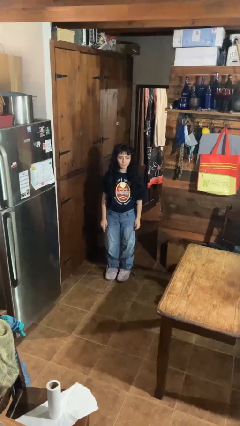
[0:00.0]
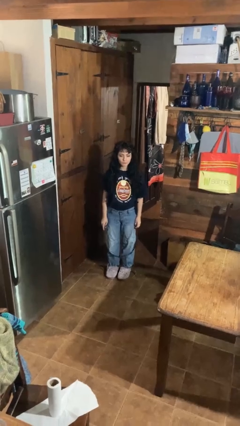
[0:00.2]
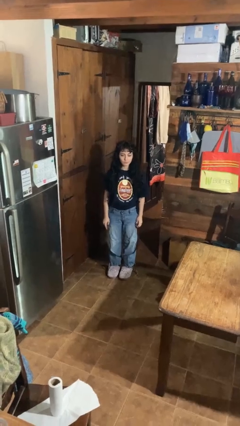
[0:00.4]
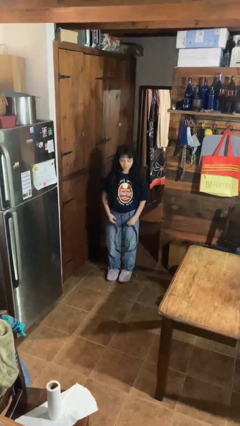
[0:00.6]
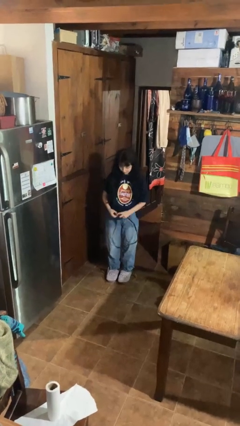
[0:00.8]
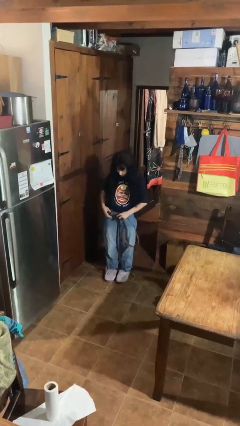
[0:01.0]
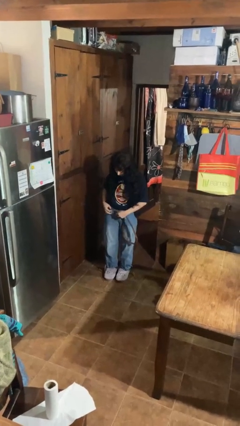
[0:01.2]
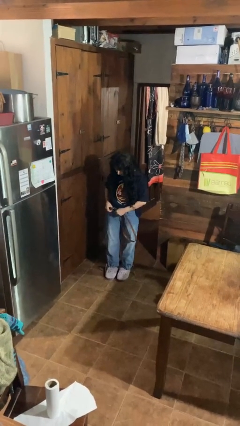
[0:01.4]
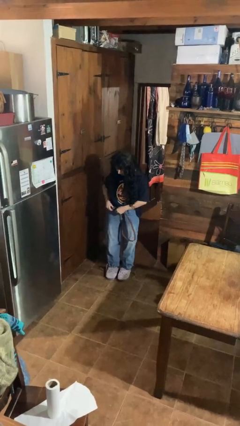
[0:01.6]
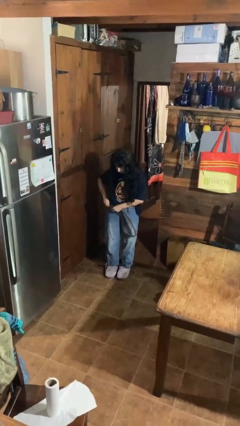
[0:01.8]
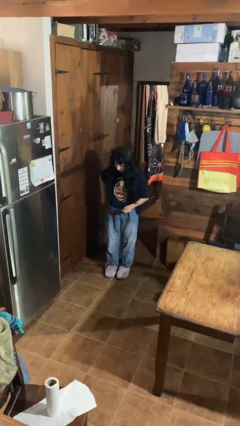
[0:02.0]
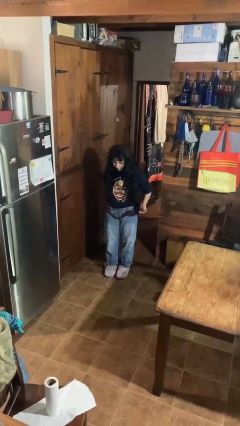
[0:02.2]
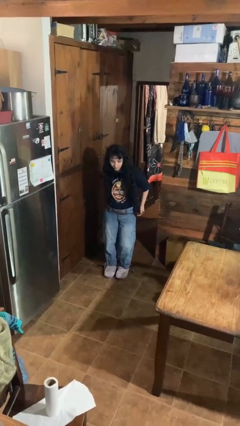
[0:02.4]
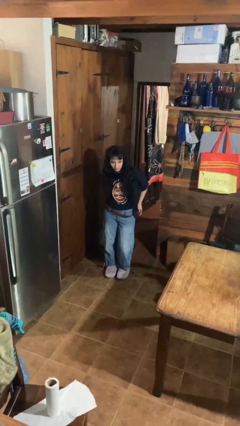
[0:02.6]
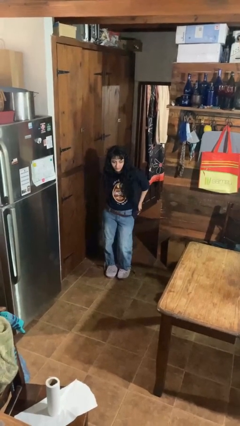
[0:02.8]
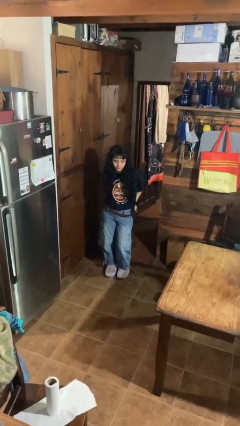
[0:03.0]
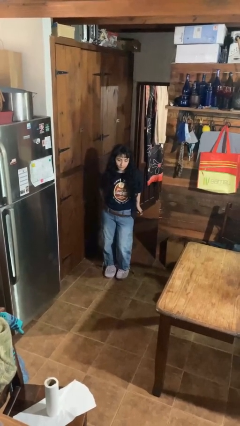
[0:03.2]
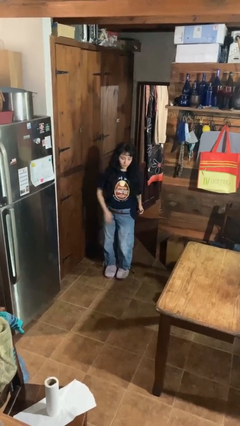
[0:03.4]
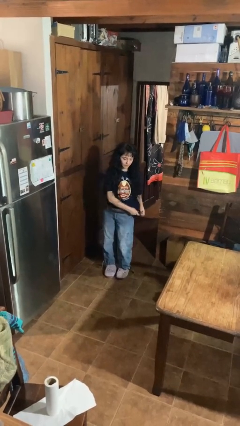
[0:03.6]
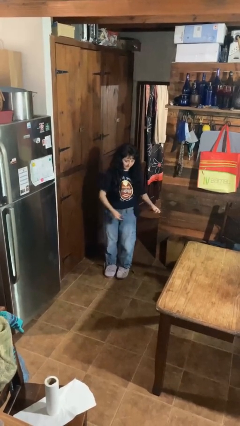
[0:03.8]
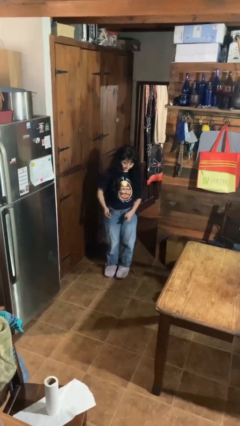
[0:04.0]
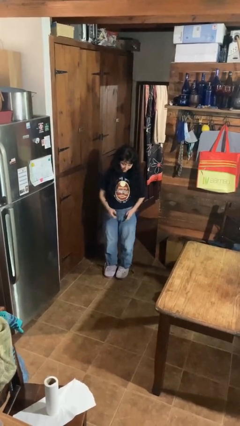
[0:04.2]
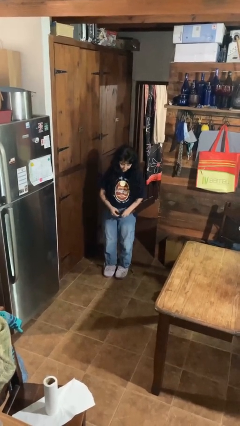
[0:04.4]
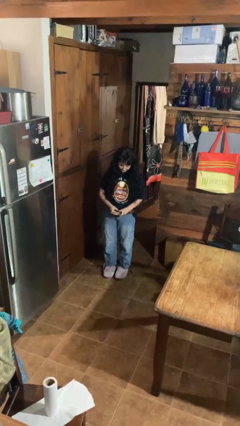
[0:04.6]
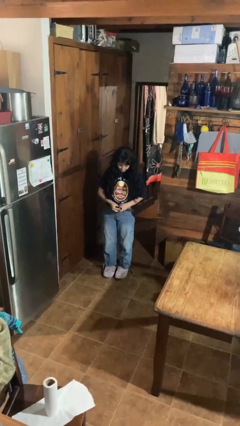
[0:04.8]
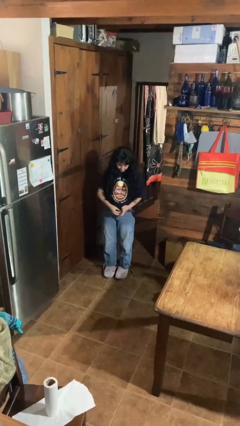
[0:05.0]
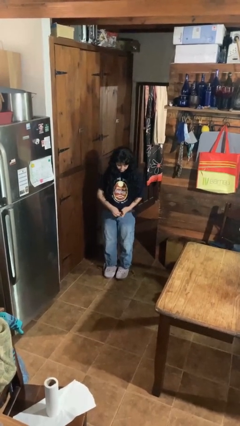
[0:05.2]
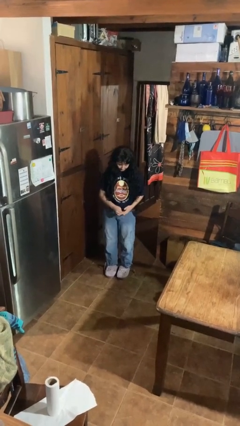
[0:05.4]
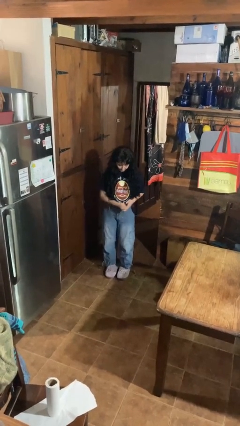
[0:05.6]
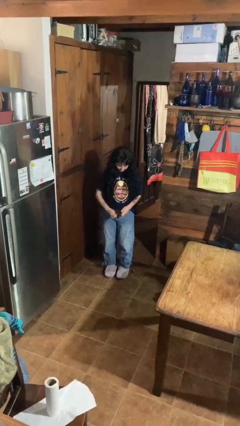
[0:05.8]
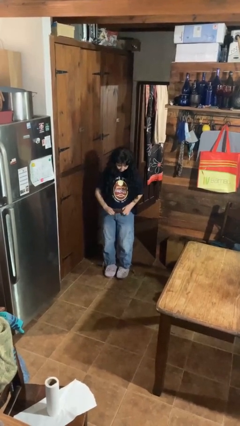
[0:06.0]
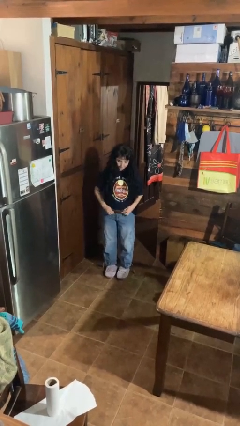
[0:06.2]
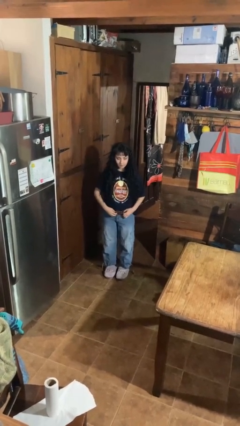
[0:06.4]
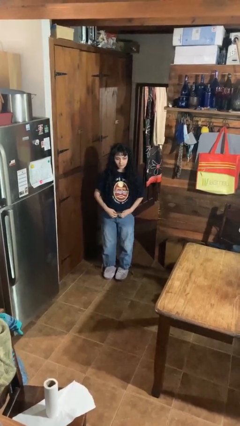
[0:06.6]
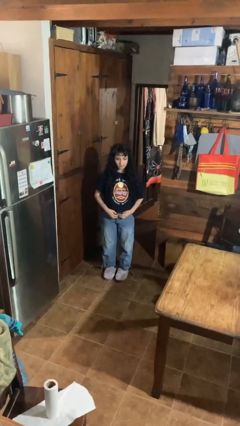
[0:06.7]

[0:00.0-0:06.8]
person puts on belt

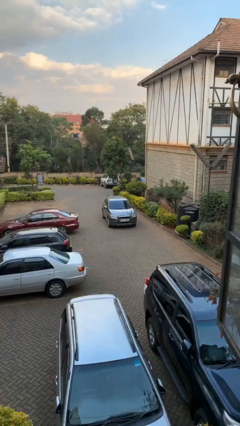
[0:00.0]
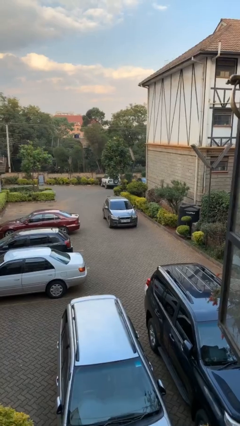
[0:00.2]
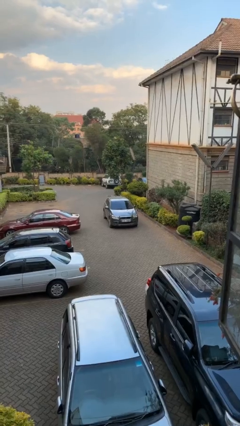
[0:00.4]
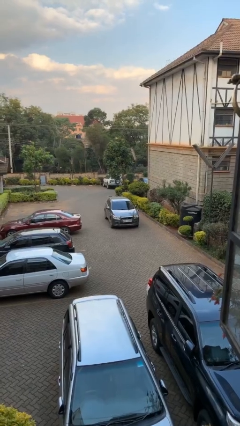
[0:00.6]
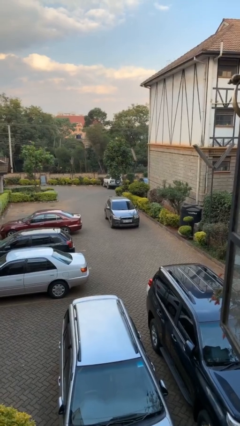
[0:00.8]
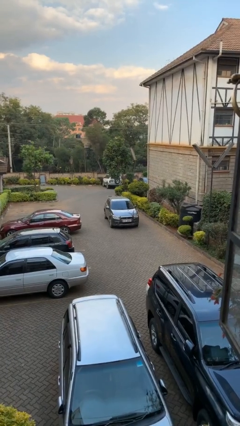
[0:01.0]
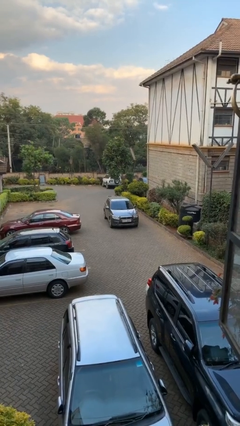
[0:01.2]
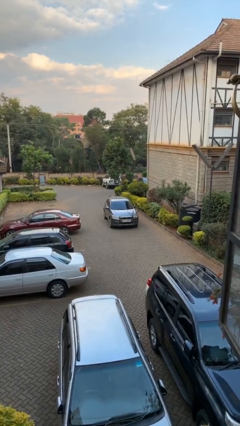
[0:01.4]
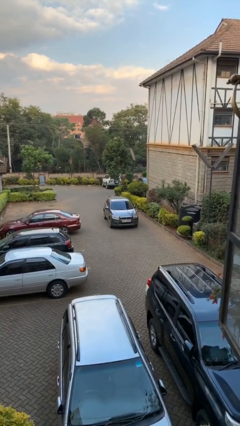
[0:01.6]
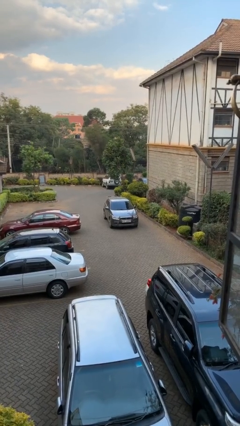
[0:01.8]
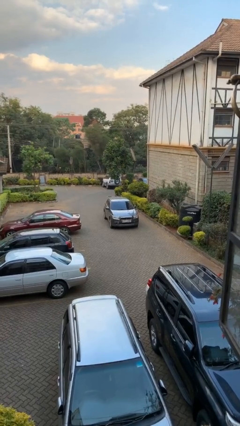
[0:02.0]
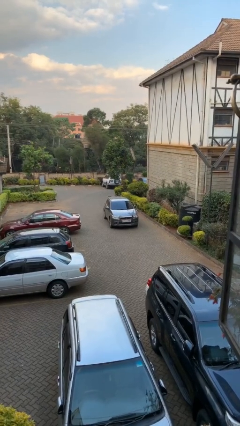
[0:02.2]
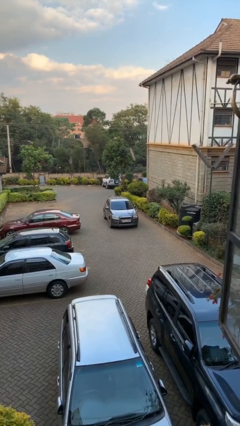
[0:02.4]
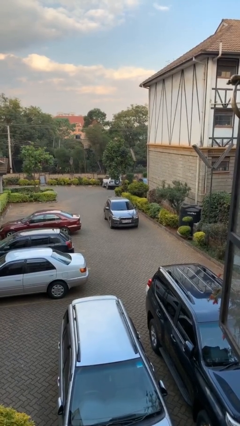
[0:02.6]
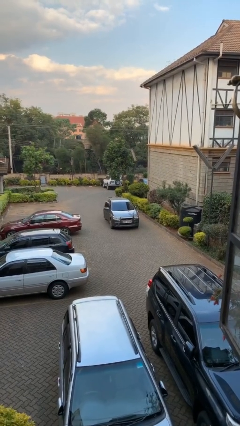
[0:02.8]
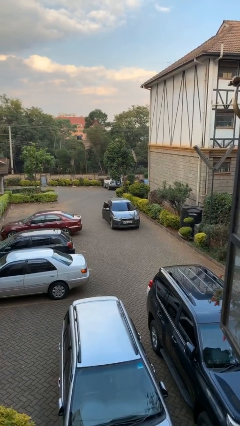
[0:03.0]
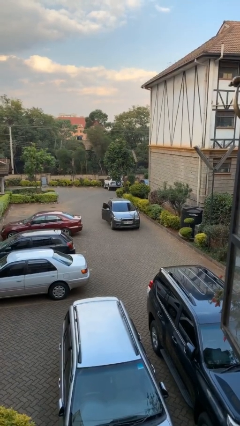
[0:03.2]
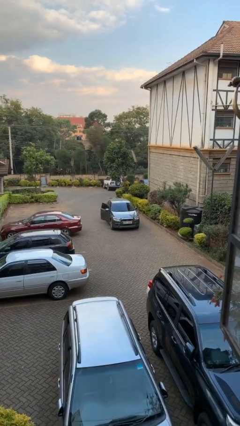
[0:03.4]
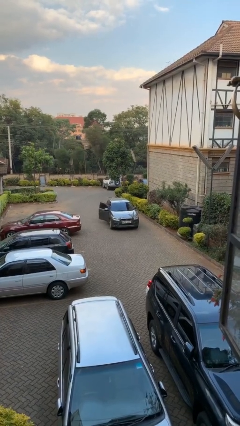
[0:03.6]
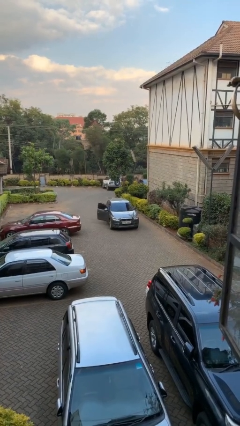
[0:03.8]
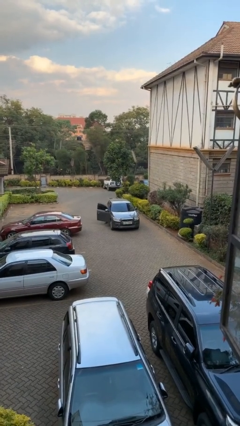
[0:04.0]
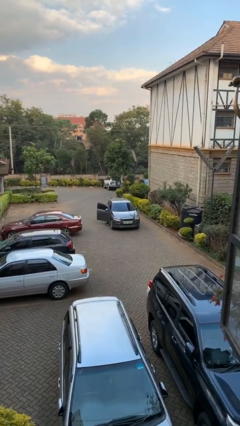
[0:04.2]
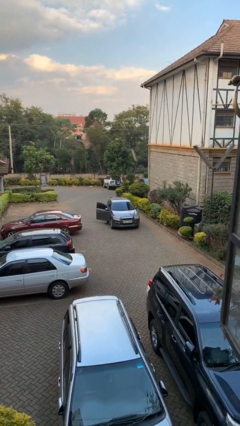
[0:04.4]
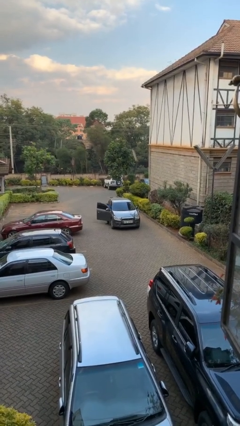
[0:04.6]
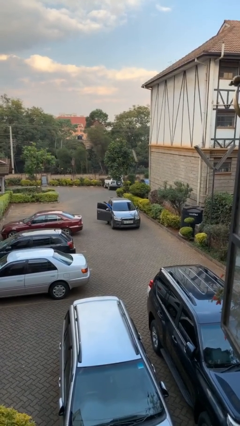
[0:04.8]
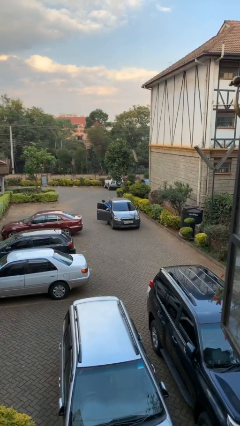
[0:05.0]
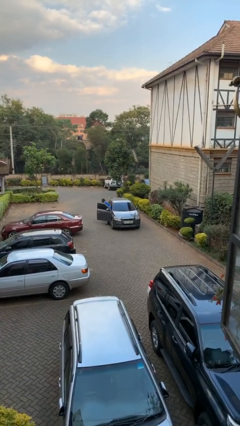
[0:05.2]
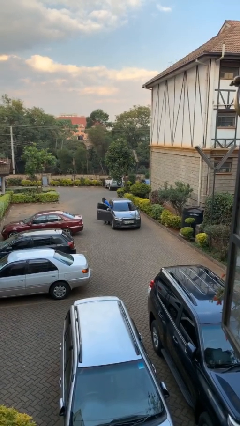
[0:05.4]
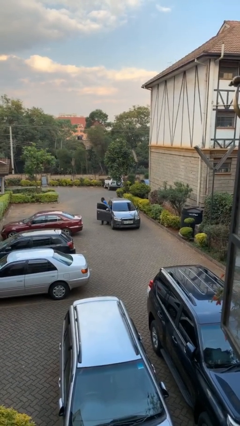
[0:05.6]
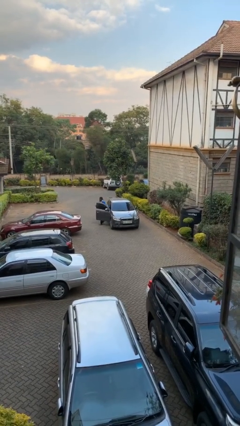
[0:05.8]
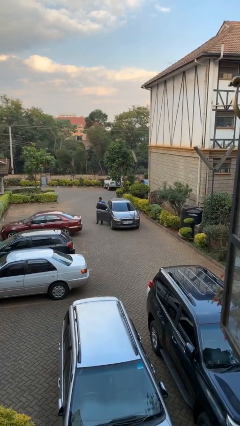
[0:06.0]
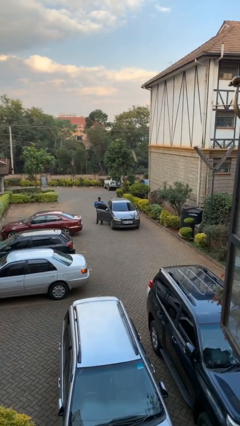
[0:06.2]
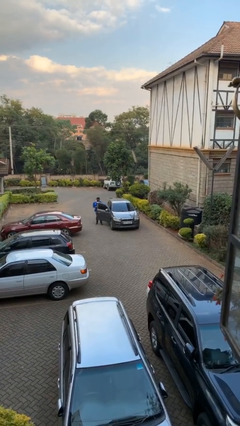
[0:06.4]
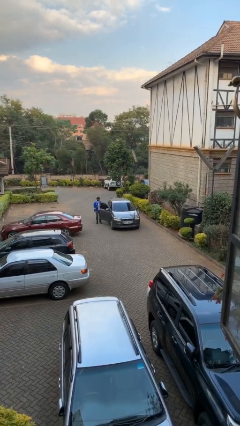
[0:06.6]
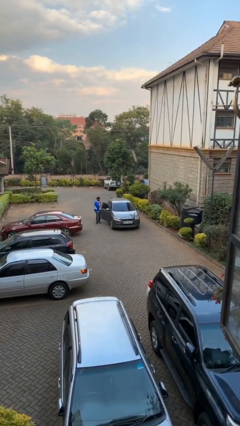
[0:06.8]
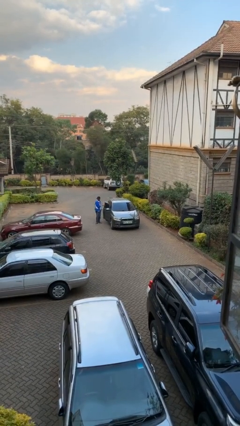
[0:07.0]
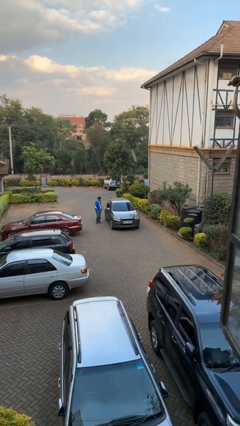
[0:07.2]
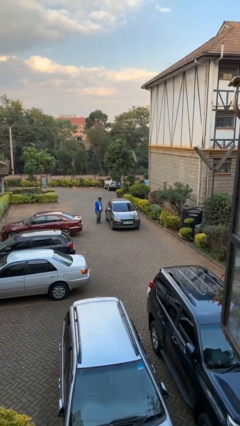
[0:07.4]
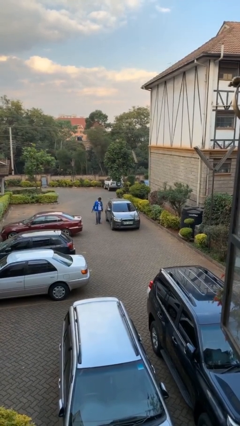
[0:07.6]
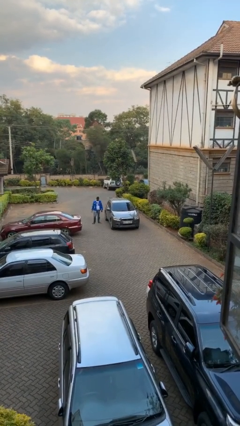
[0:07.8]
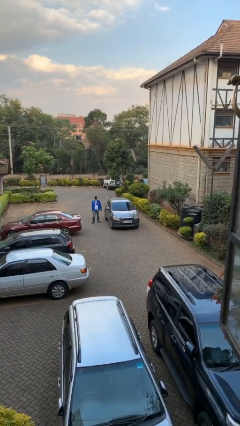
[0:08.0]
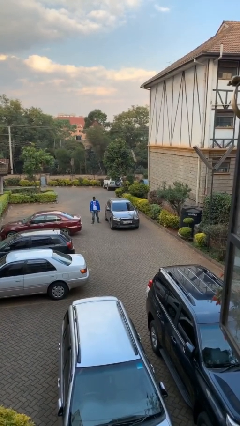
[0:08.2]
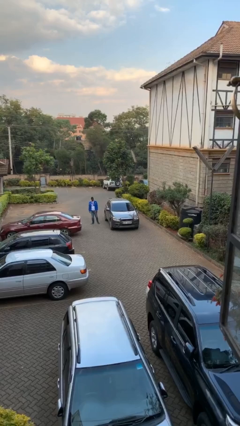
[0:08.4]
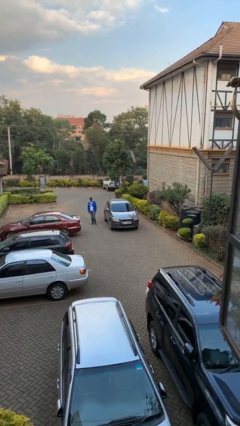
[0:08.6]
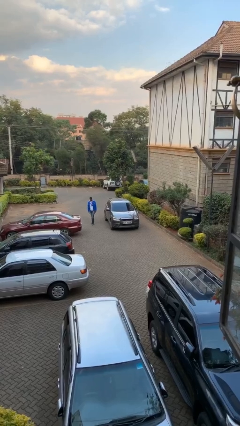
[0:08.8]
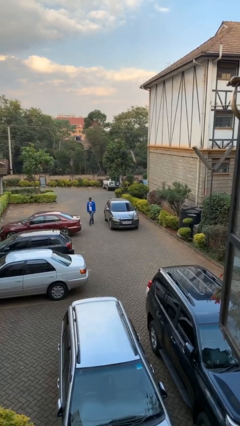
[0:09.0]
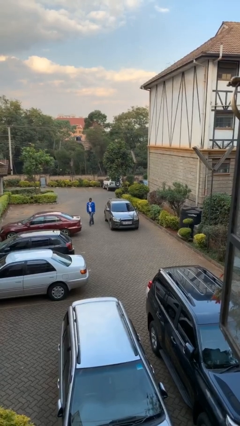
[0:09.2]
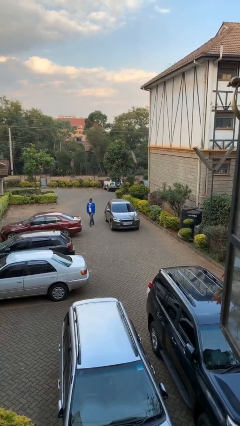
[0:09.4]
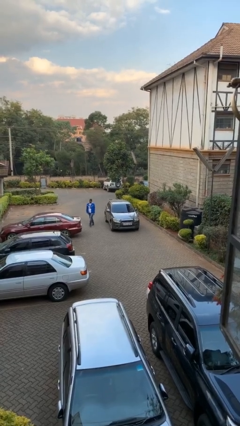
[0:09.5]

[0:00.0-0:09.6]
car drops off person

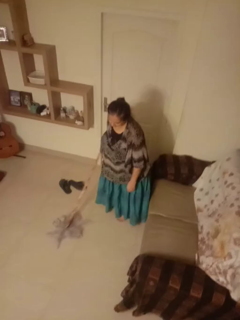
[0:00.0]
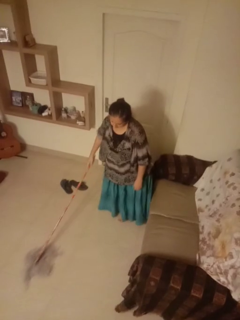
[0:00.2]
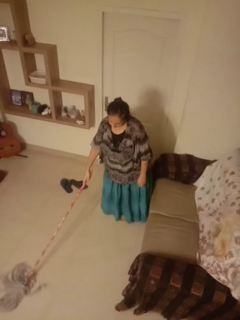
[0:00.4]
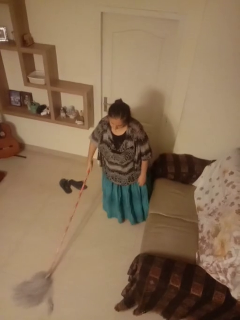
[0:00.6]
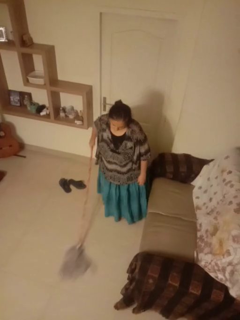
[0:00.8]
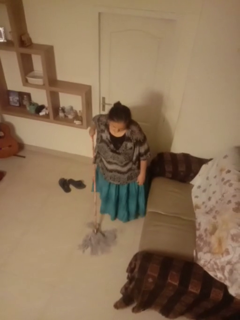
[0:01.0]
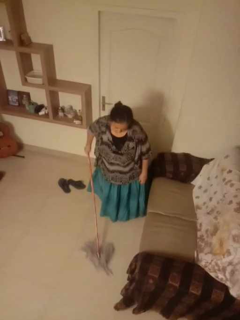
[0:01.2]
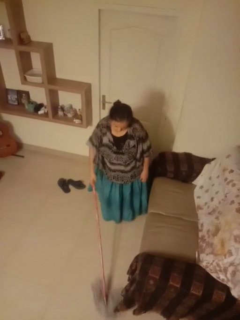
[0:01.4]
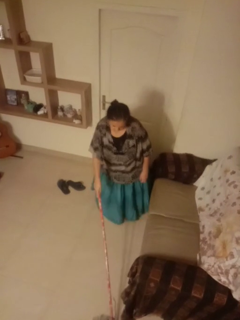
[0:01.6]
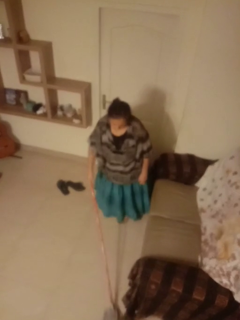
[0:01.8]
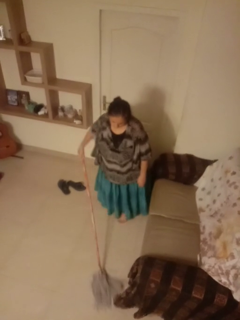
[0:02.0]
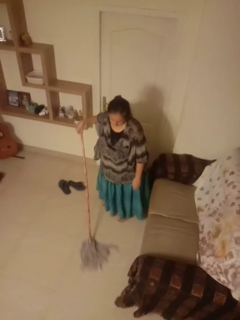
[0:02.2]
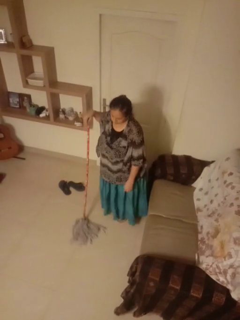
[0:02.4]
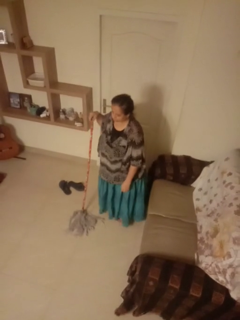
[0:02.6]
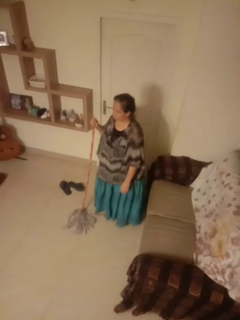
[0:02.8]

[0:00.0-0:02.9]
person mops
